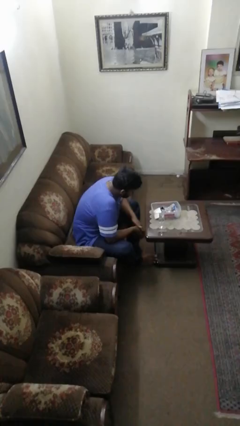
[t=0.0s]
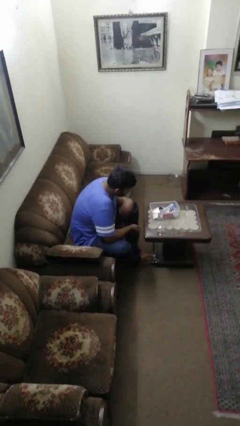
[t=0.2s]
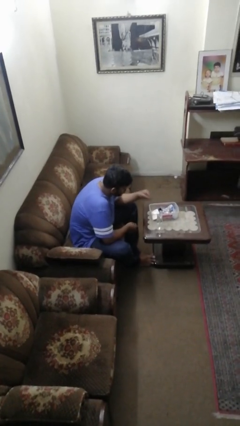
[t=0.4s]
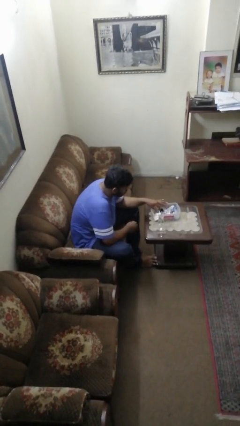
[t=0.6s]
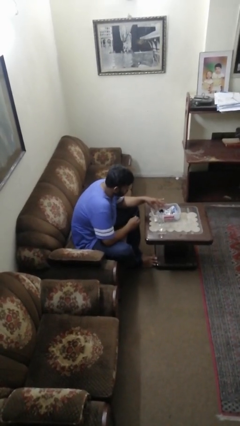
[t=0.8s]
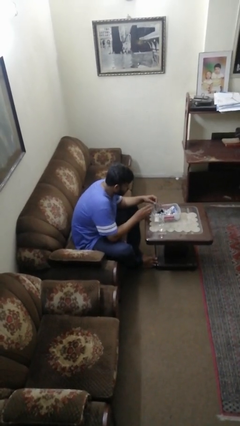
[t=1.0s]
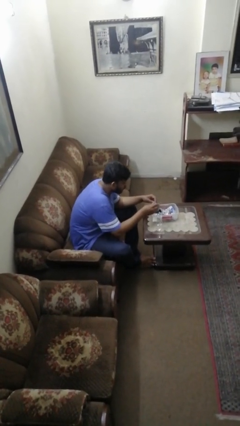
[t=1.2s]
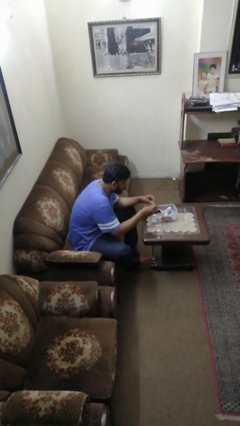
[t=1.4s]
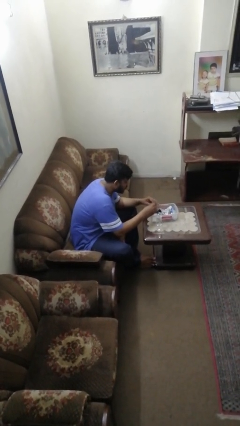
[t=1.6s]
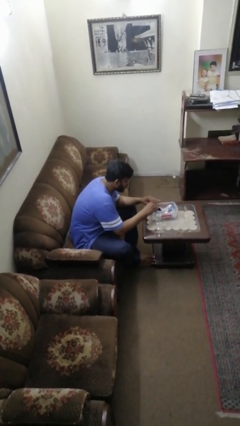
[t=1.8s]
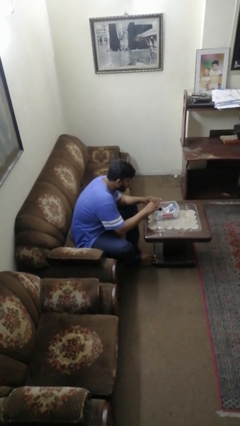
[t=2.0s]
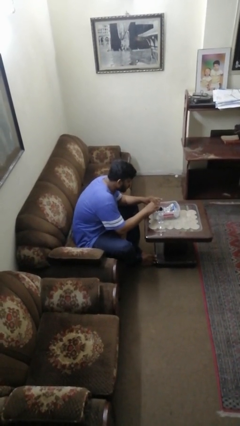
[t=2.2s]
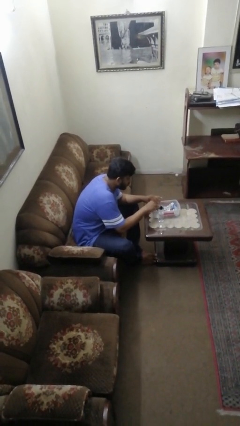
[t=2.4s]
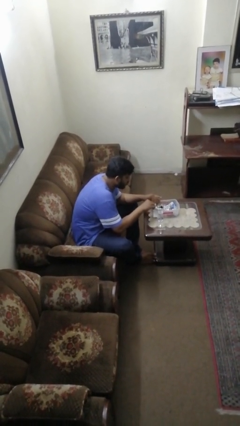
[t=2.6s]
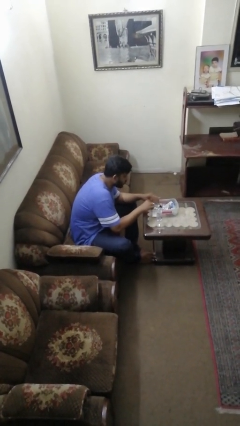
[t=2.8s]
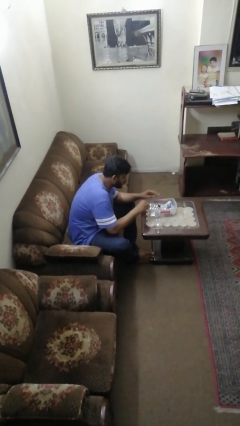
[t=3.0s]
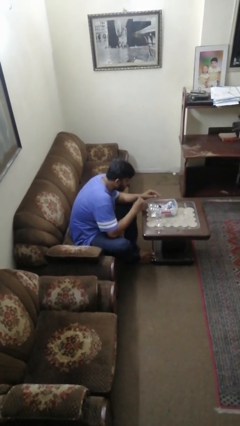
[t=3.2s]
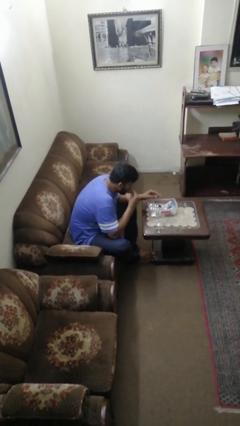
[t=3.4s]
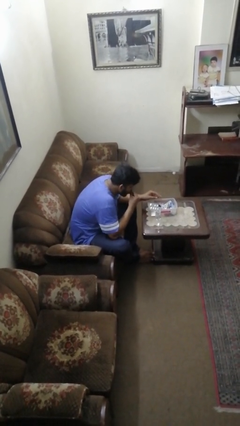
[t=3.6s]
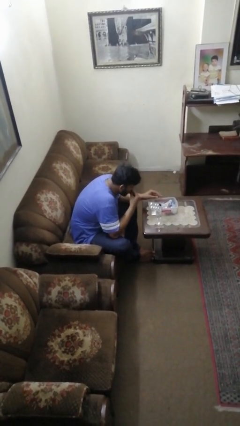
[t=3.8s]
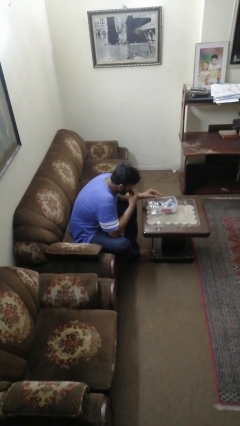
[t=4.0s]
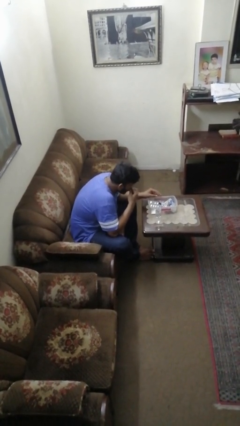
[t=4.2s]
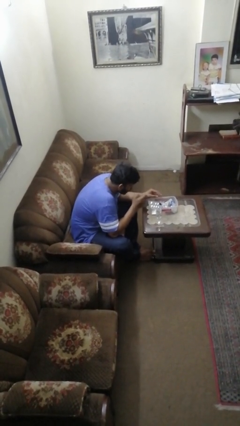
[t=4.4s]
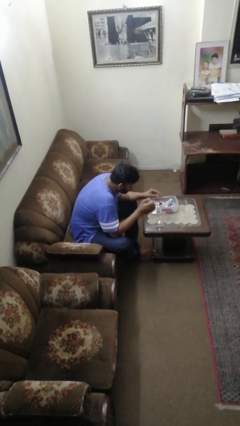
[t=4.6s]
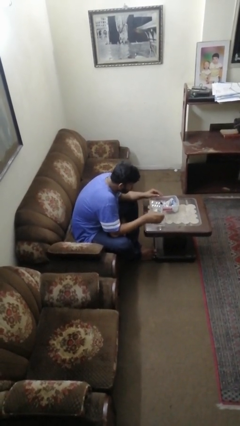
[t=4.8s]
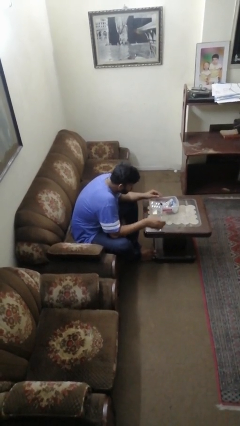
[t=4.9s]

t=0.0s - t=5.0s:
person takes medicine pills

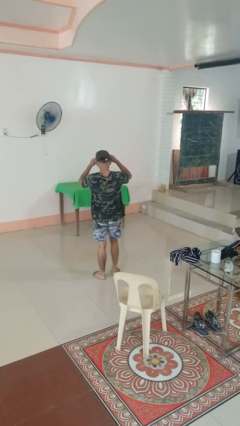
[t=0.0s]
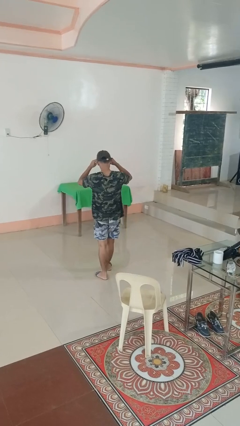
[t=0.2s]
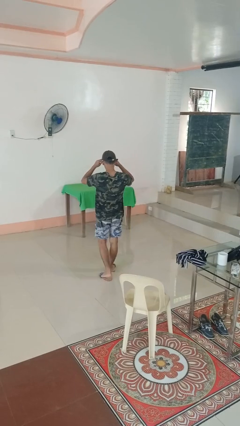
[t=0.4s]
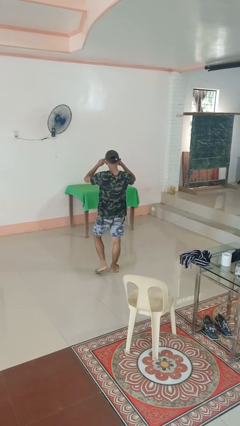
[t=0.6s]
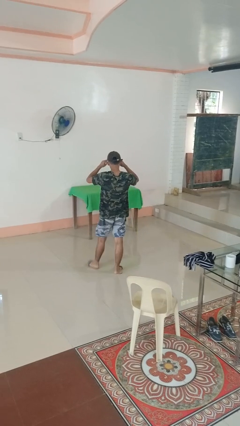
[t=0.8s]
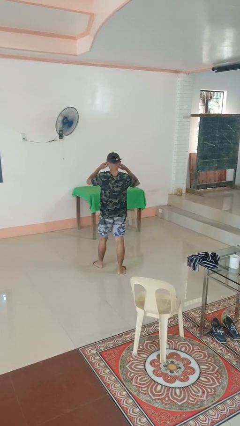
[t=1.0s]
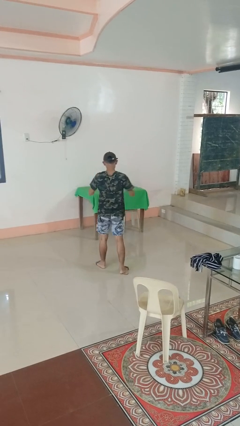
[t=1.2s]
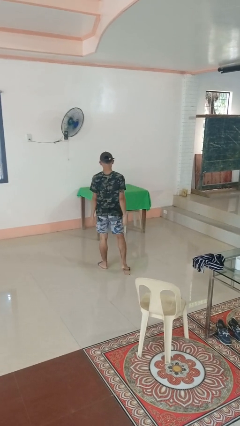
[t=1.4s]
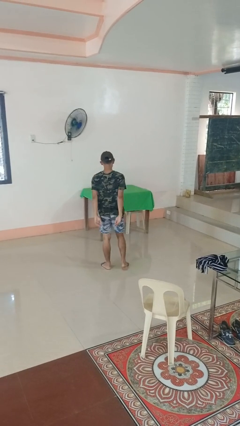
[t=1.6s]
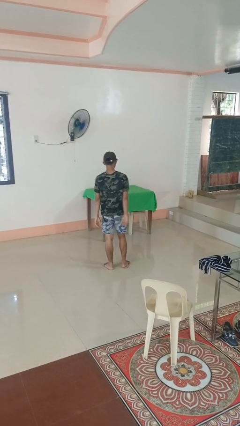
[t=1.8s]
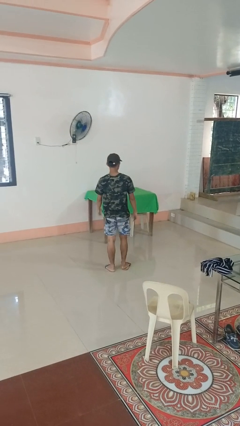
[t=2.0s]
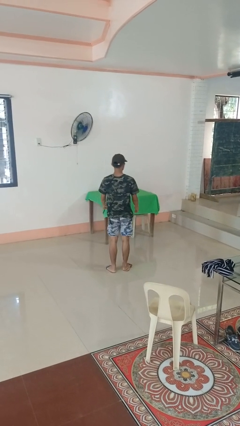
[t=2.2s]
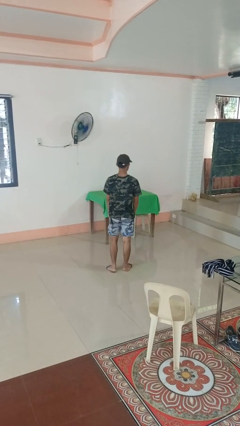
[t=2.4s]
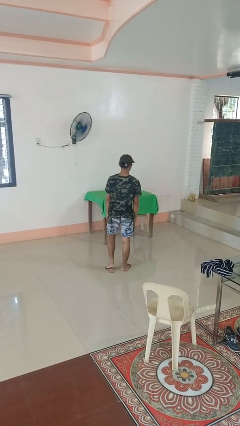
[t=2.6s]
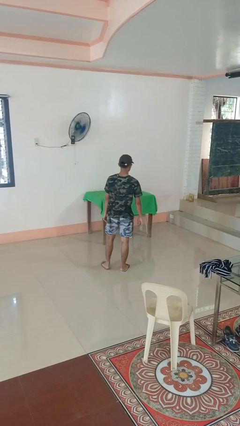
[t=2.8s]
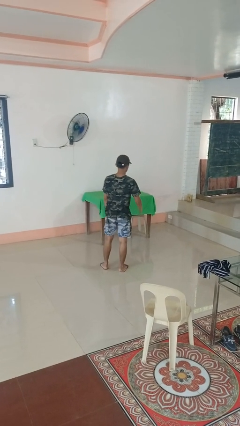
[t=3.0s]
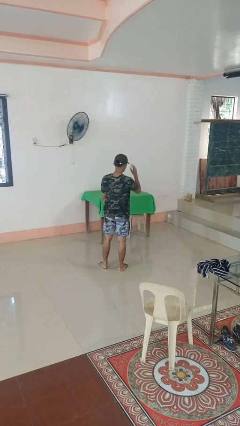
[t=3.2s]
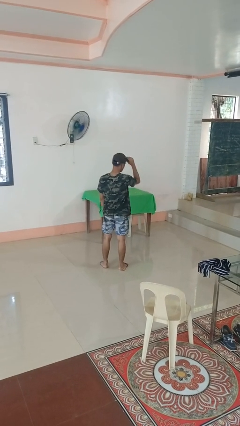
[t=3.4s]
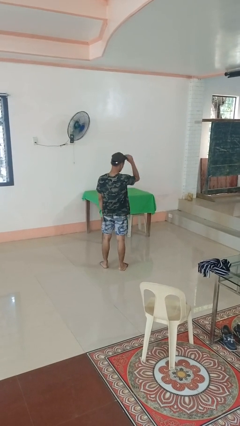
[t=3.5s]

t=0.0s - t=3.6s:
person puts on hat

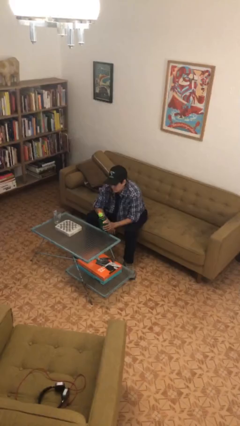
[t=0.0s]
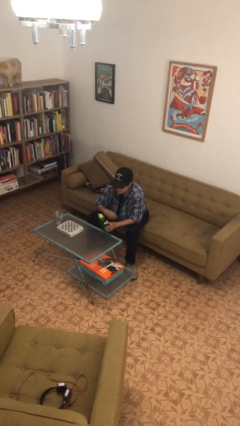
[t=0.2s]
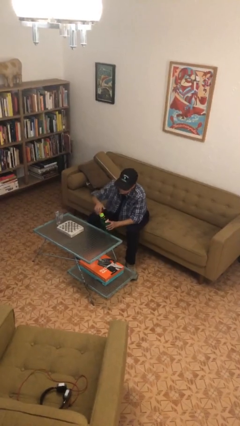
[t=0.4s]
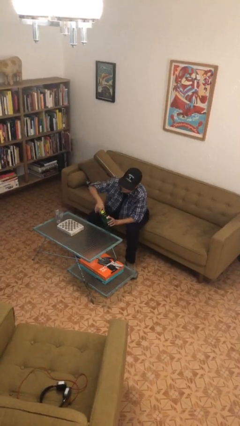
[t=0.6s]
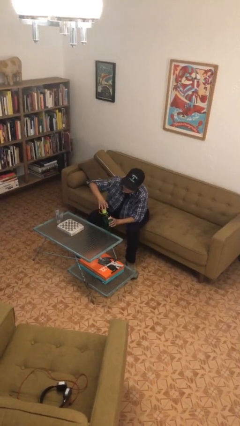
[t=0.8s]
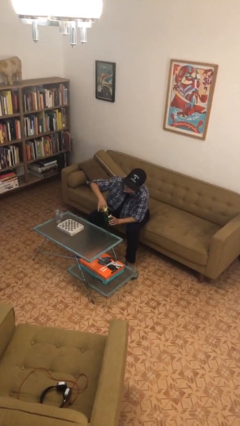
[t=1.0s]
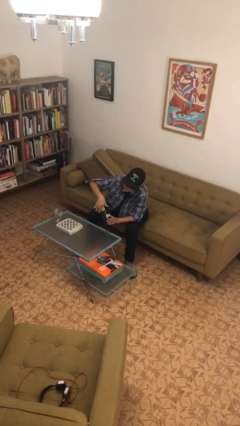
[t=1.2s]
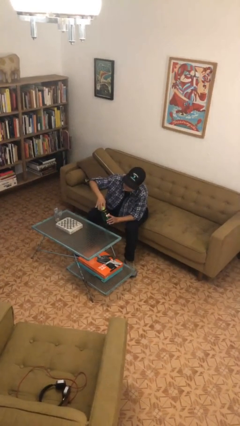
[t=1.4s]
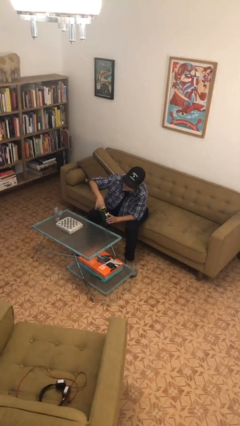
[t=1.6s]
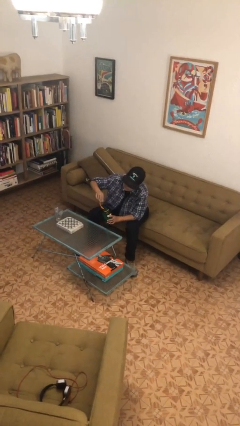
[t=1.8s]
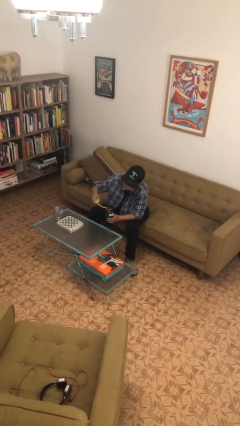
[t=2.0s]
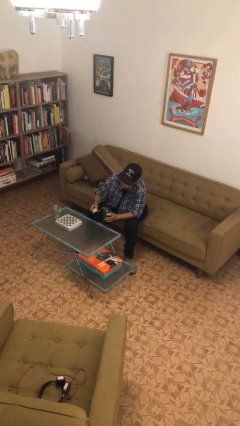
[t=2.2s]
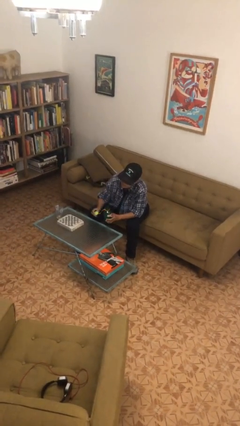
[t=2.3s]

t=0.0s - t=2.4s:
person unscrews lid from bottle

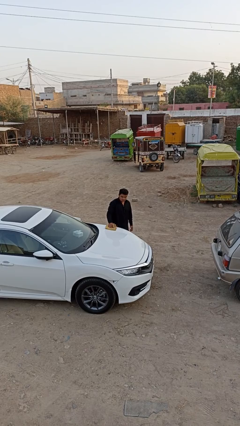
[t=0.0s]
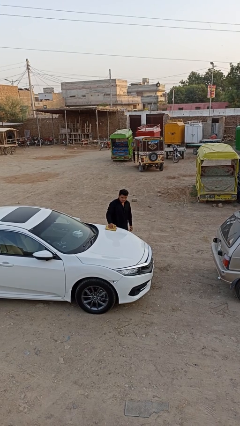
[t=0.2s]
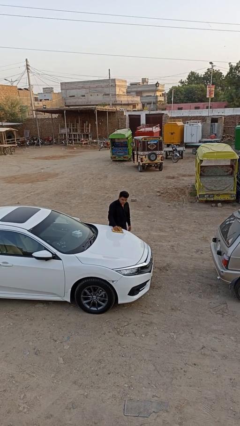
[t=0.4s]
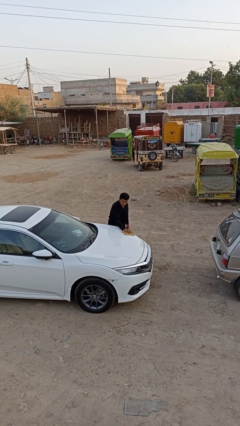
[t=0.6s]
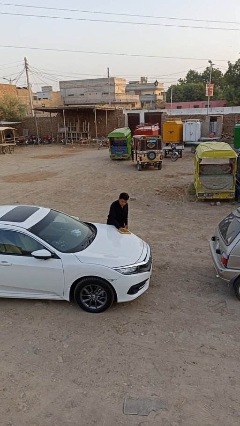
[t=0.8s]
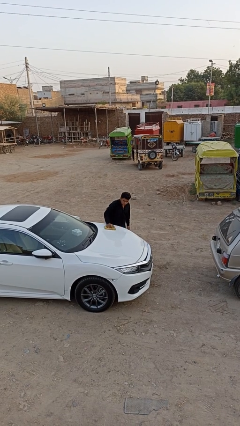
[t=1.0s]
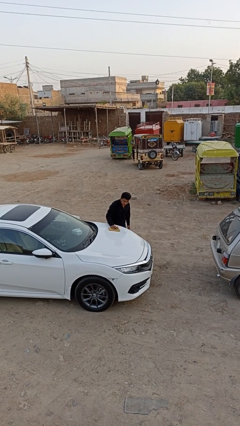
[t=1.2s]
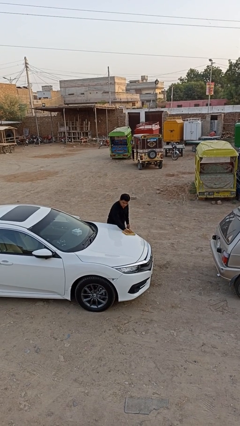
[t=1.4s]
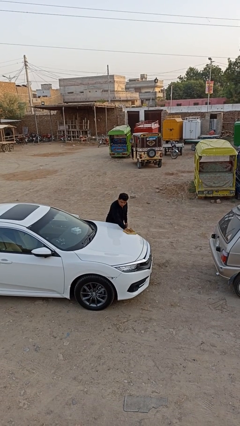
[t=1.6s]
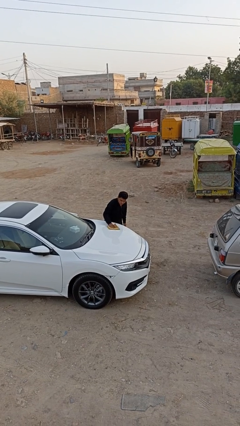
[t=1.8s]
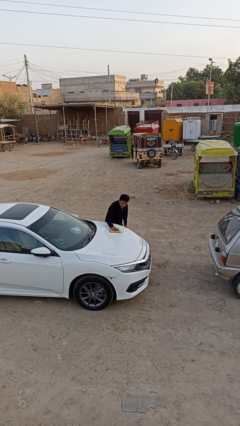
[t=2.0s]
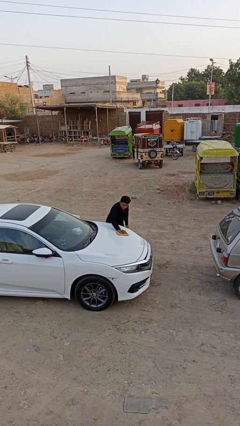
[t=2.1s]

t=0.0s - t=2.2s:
person polishes car with rag

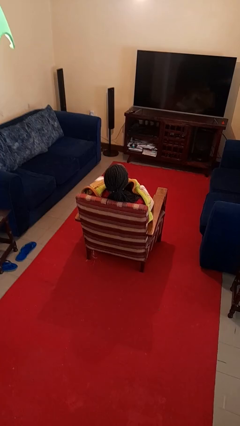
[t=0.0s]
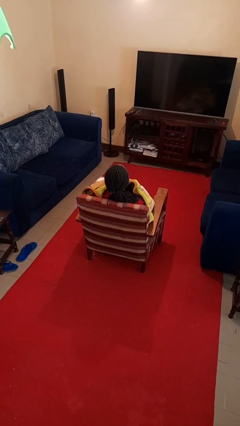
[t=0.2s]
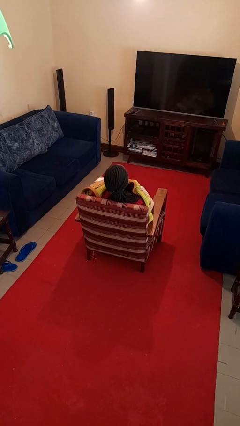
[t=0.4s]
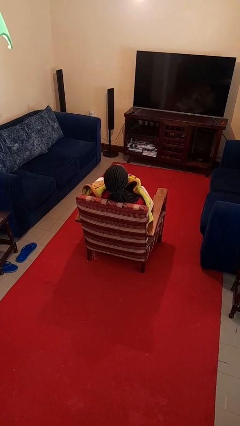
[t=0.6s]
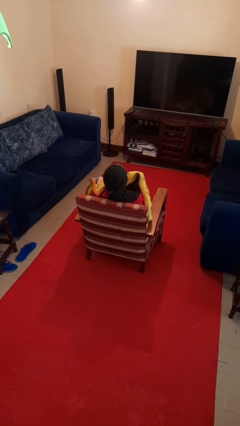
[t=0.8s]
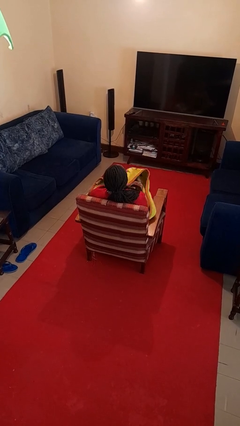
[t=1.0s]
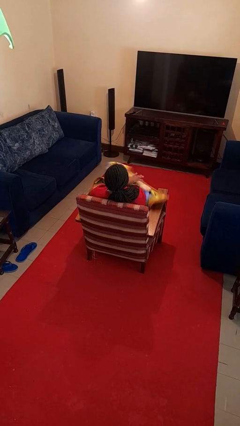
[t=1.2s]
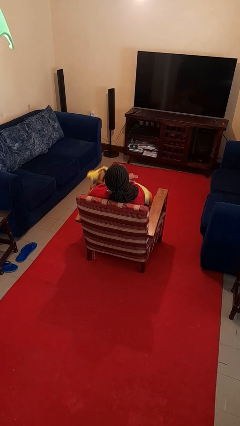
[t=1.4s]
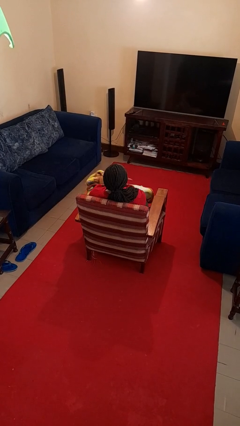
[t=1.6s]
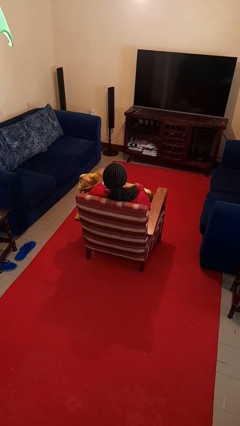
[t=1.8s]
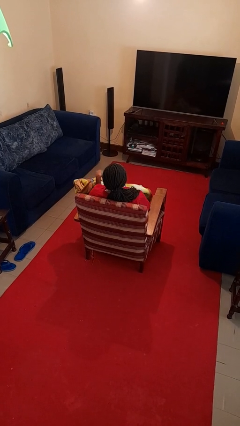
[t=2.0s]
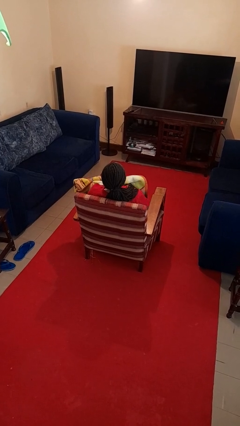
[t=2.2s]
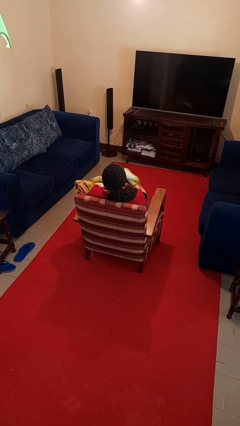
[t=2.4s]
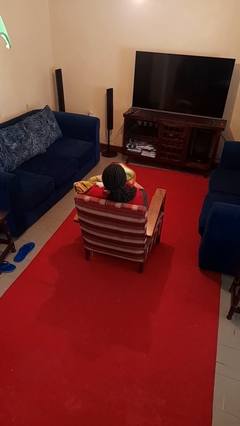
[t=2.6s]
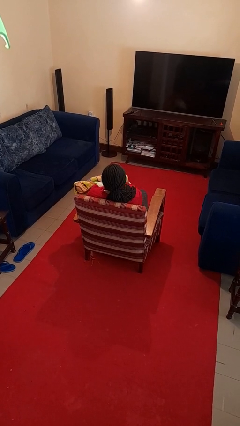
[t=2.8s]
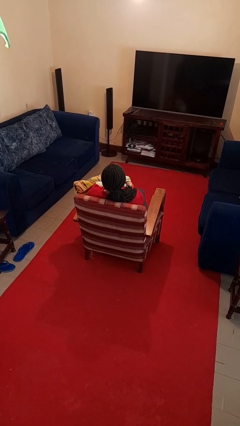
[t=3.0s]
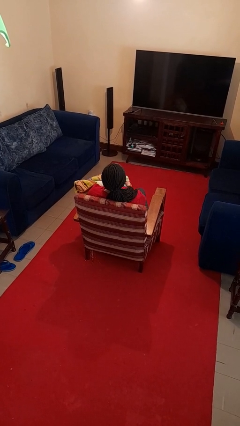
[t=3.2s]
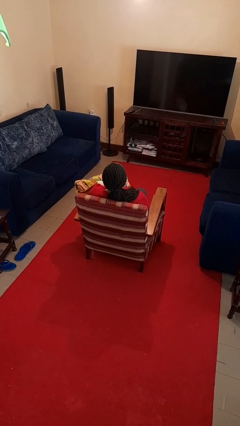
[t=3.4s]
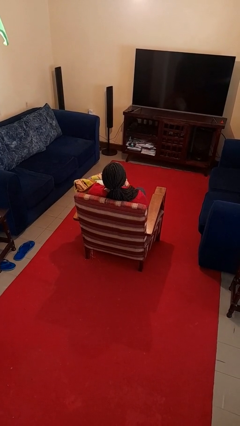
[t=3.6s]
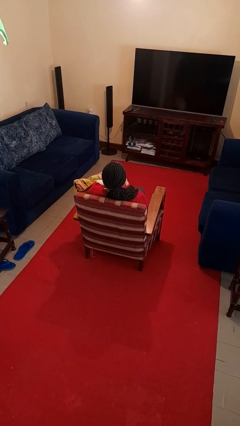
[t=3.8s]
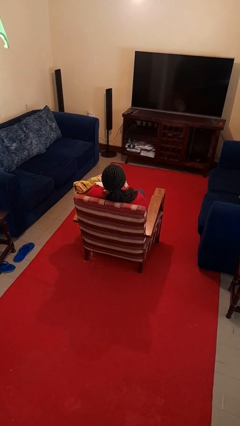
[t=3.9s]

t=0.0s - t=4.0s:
person uncovers with blanket

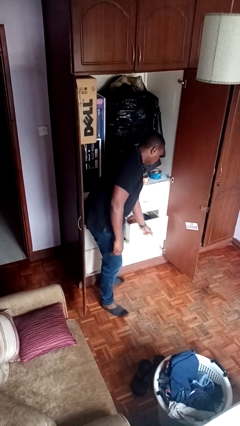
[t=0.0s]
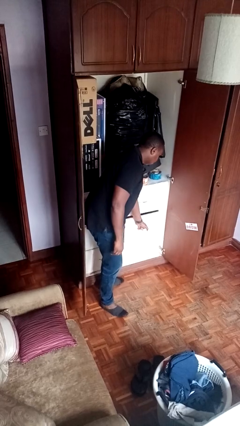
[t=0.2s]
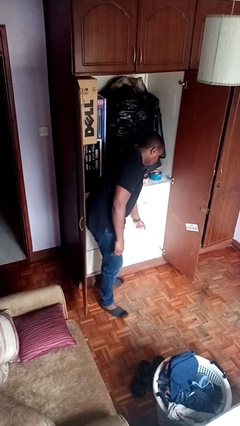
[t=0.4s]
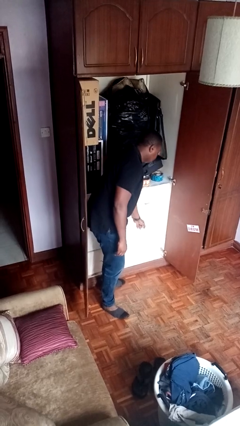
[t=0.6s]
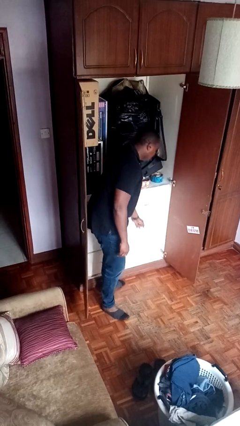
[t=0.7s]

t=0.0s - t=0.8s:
person closes dresser drawer
